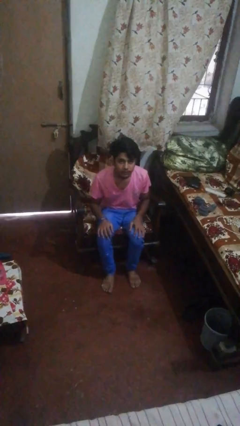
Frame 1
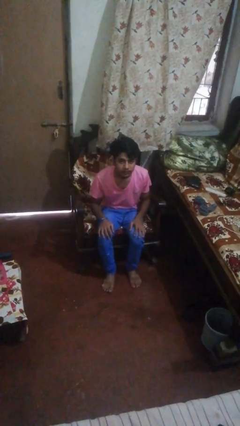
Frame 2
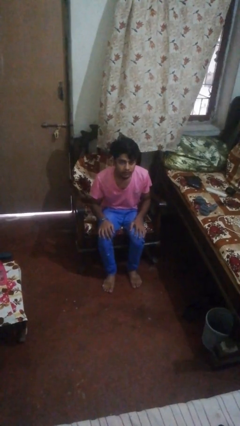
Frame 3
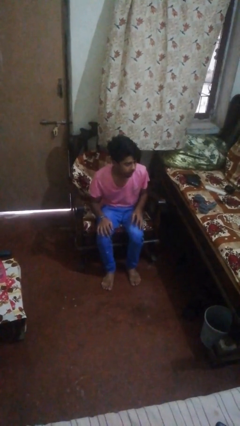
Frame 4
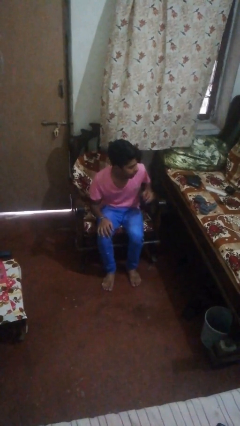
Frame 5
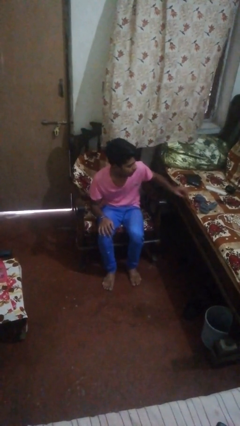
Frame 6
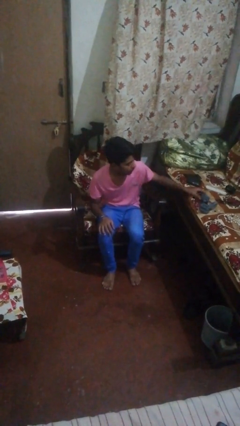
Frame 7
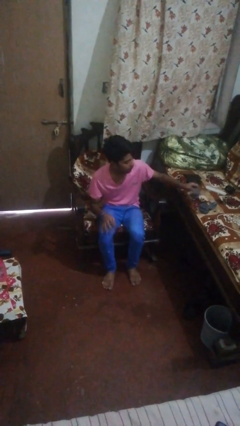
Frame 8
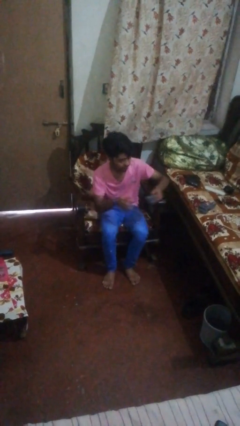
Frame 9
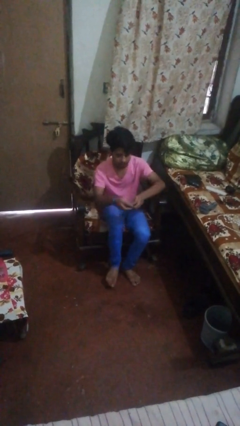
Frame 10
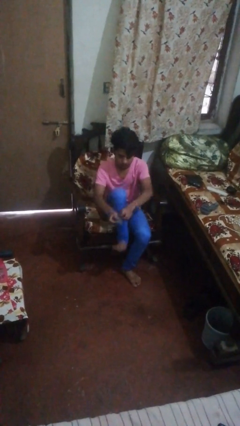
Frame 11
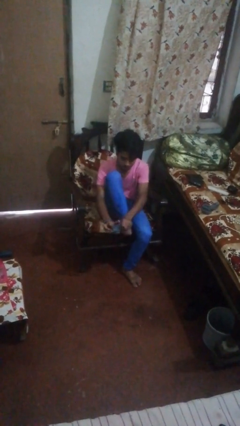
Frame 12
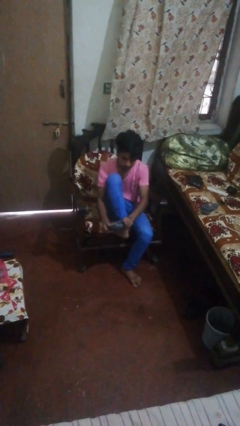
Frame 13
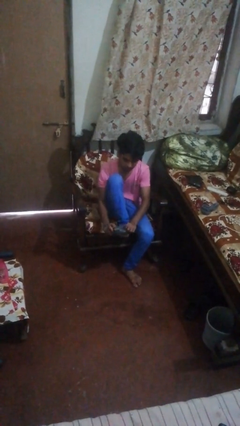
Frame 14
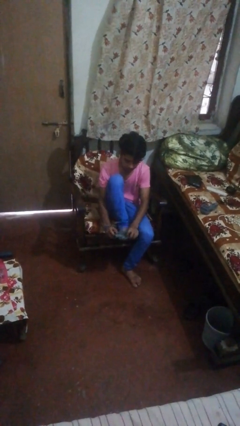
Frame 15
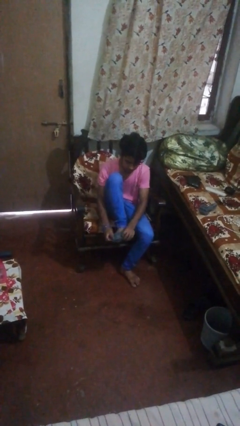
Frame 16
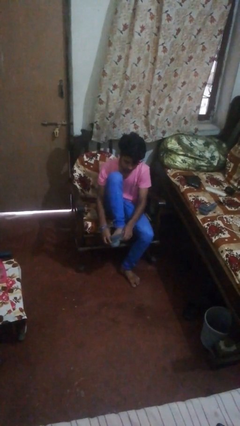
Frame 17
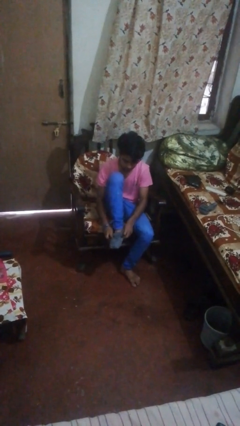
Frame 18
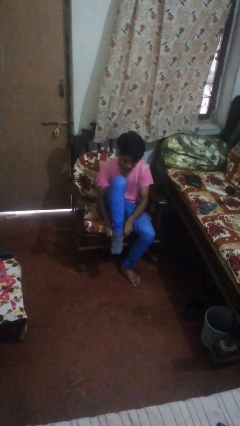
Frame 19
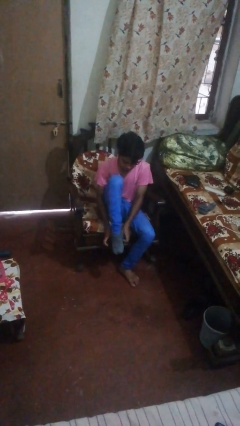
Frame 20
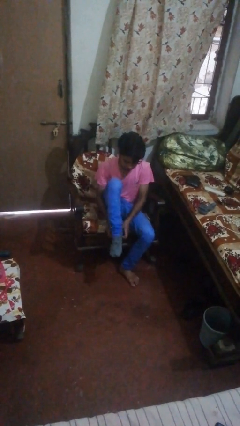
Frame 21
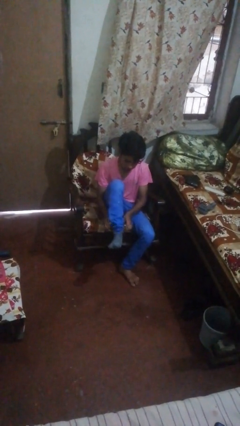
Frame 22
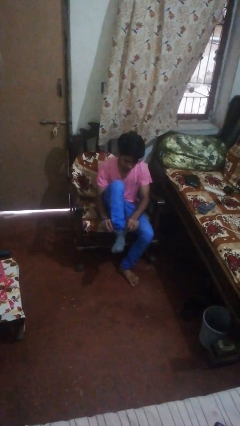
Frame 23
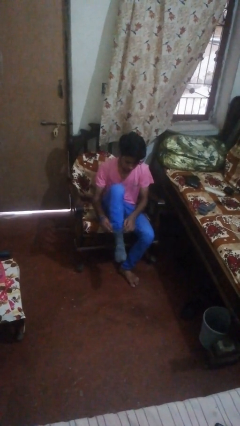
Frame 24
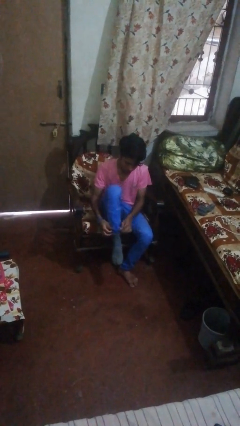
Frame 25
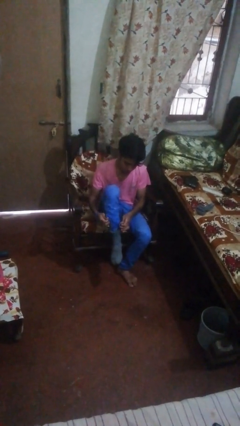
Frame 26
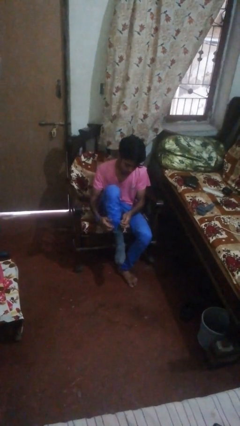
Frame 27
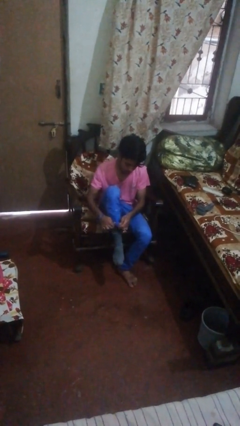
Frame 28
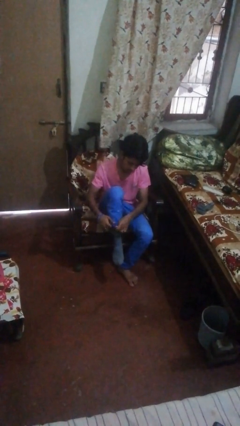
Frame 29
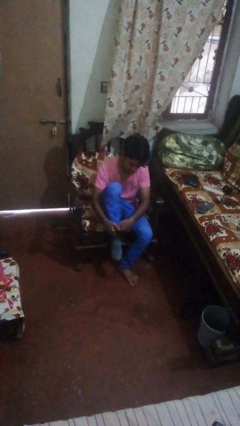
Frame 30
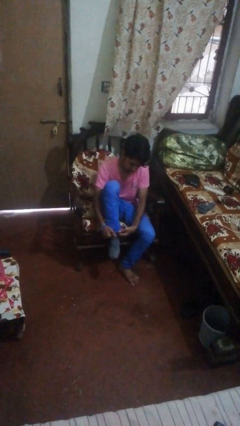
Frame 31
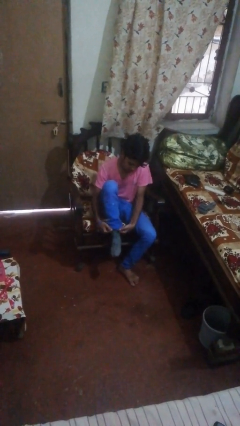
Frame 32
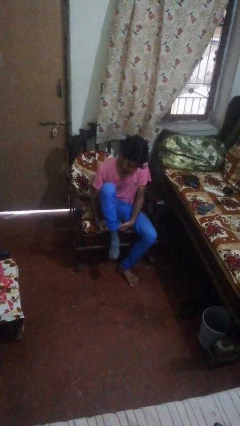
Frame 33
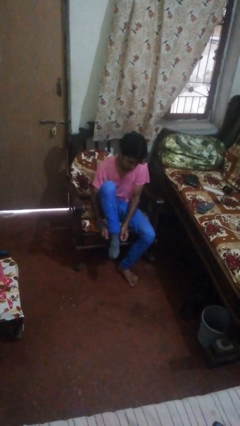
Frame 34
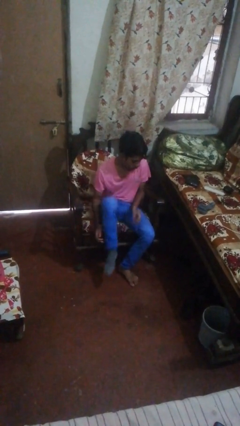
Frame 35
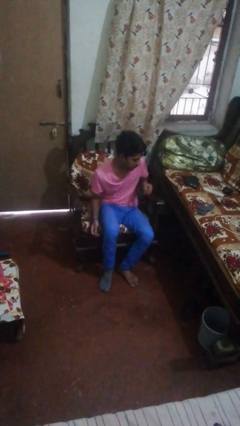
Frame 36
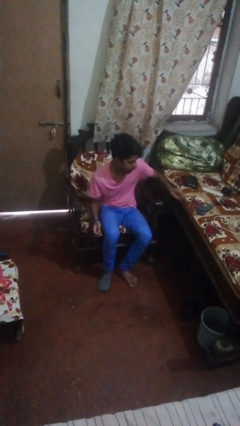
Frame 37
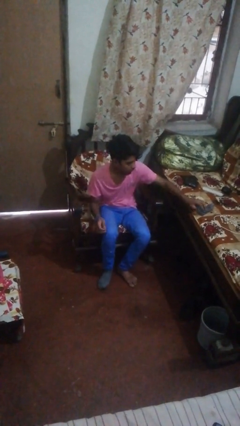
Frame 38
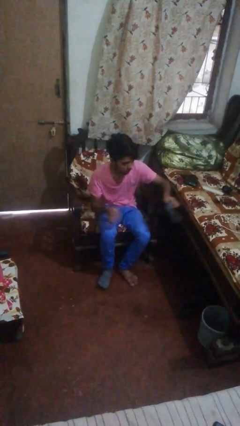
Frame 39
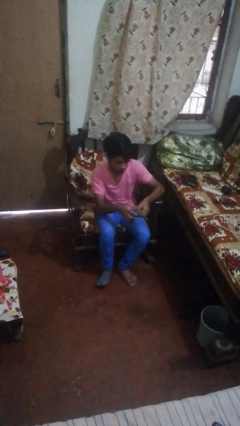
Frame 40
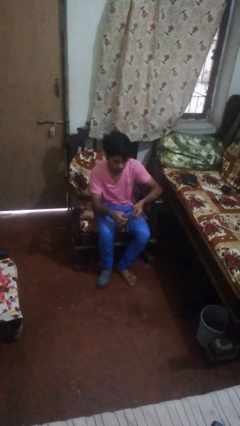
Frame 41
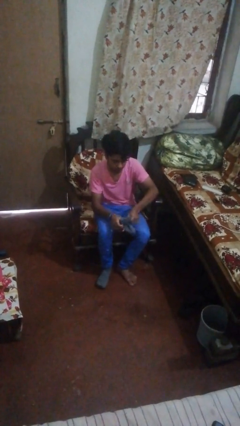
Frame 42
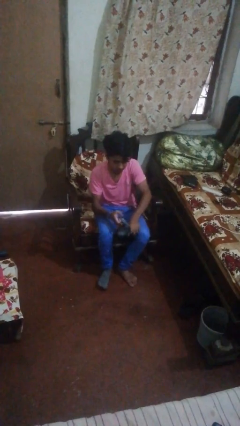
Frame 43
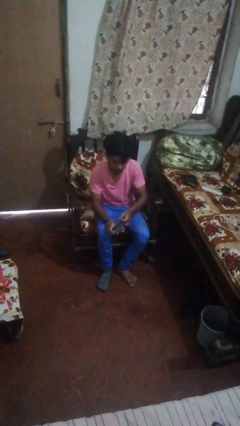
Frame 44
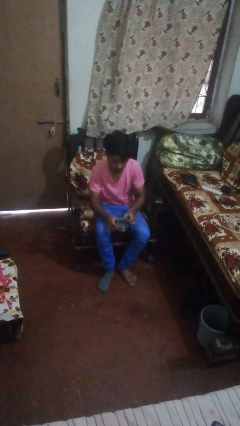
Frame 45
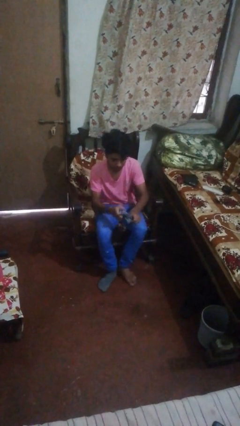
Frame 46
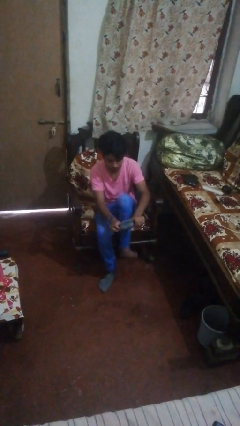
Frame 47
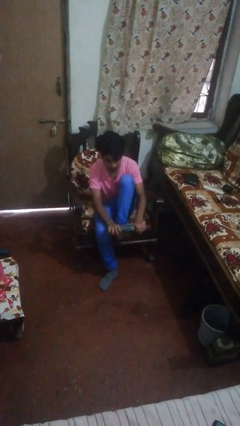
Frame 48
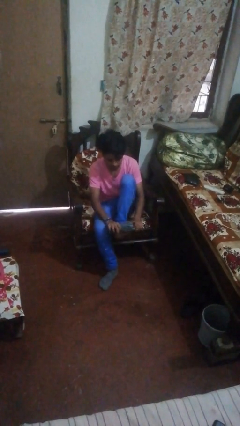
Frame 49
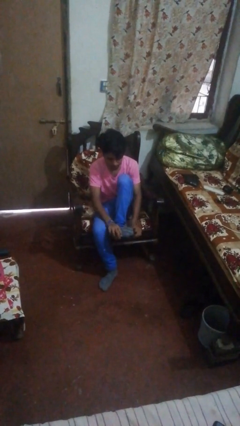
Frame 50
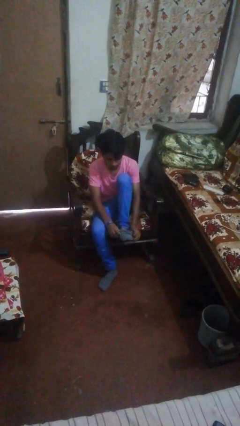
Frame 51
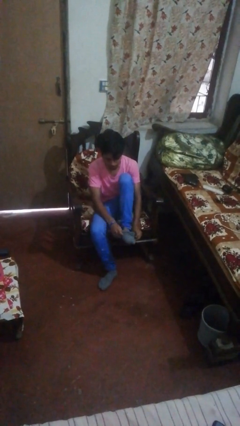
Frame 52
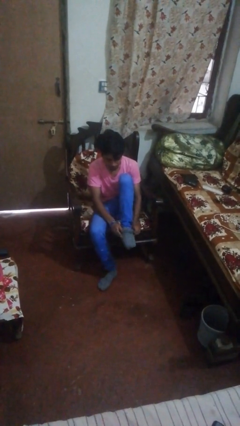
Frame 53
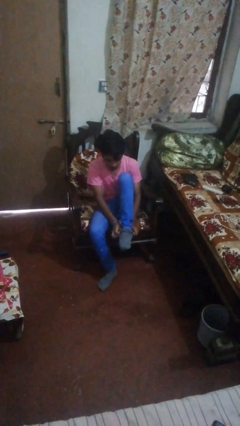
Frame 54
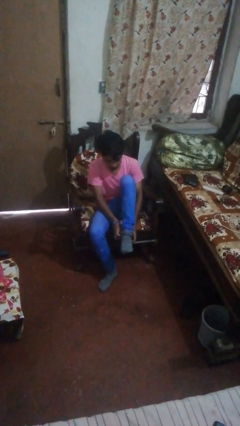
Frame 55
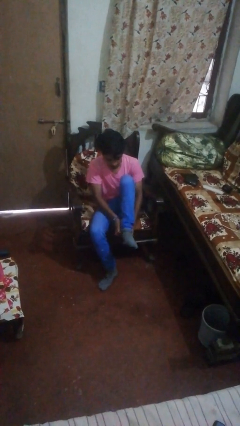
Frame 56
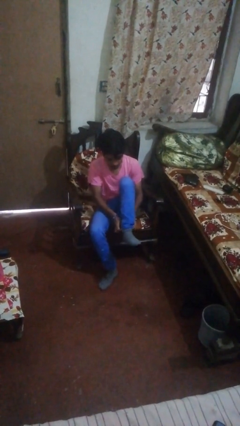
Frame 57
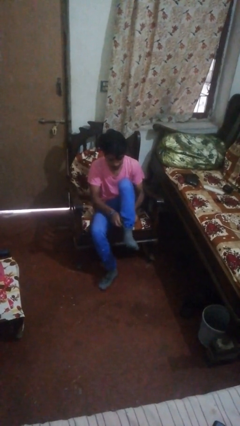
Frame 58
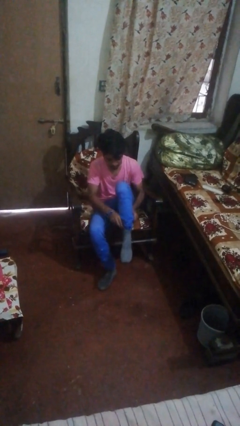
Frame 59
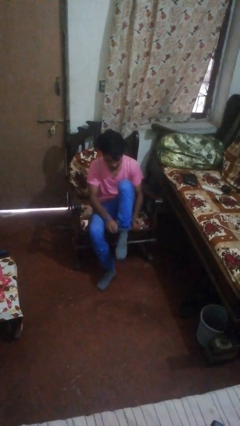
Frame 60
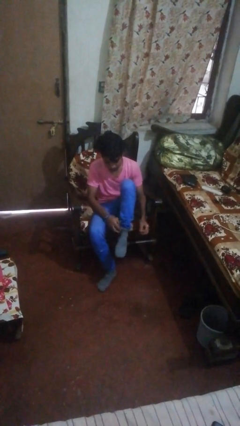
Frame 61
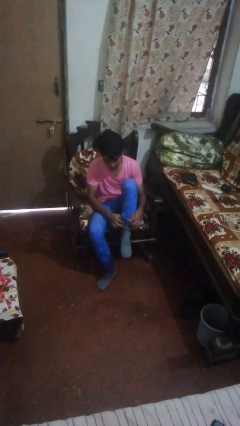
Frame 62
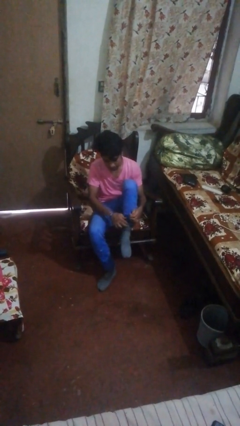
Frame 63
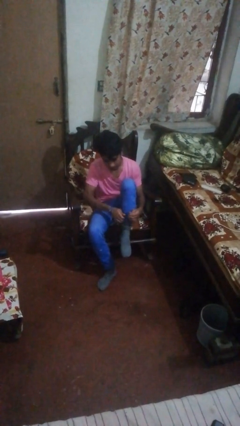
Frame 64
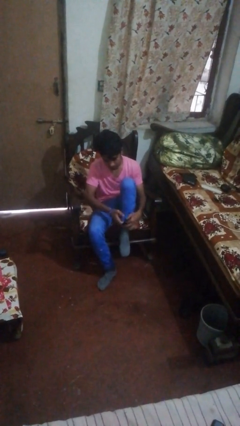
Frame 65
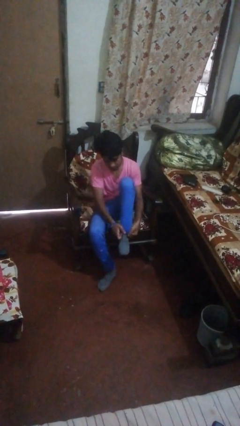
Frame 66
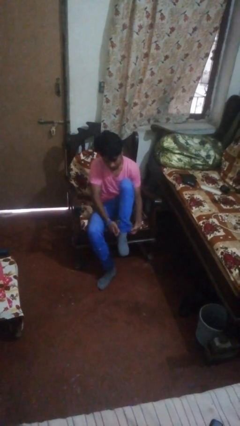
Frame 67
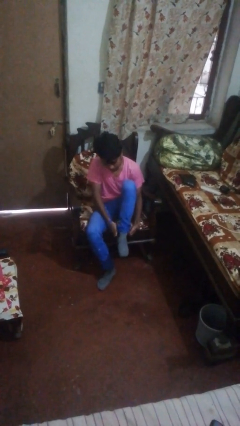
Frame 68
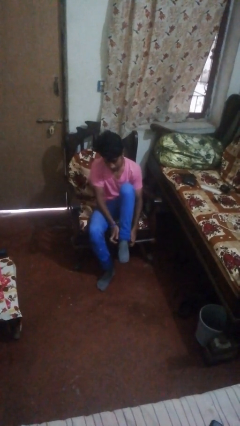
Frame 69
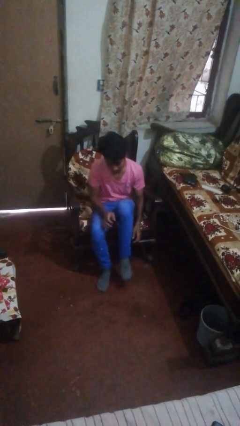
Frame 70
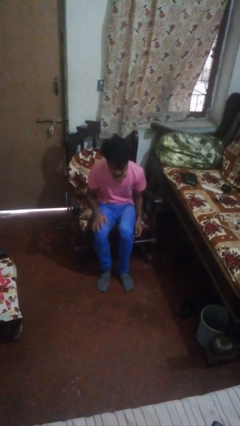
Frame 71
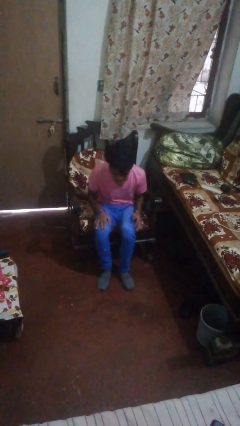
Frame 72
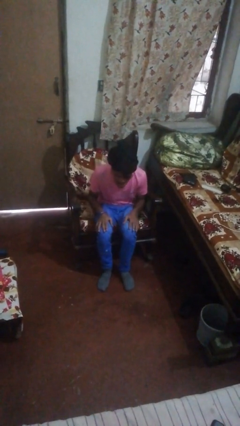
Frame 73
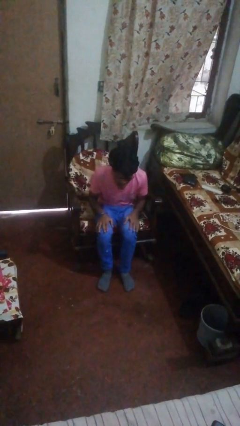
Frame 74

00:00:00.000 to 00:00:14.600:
person puts on socks

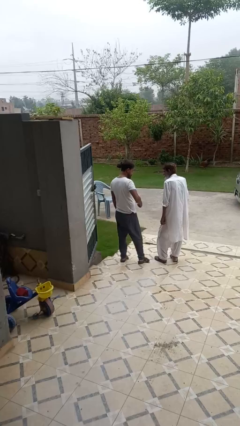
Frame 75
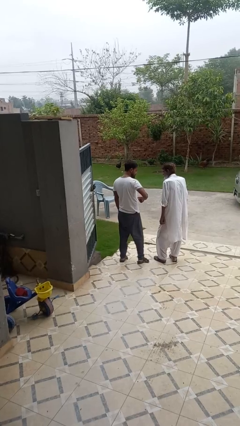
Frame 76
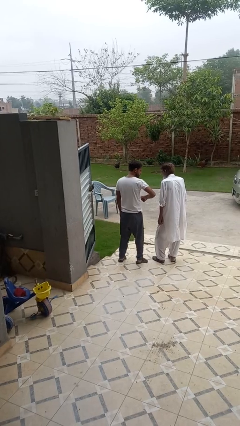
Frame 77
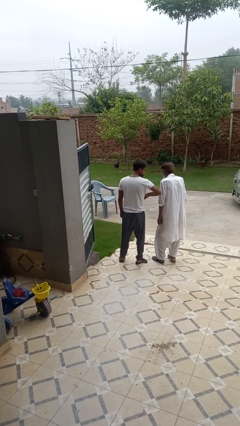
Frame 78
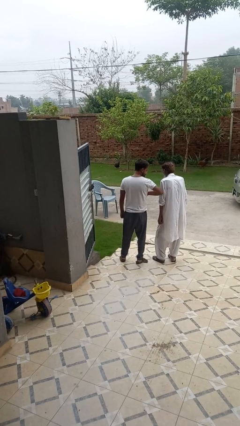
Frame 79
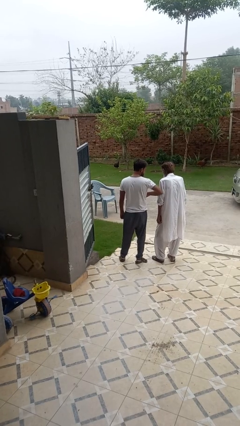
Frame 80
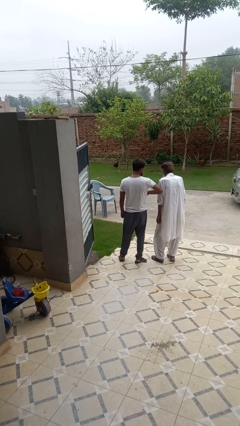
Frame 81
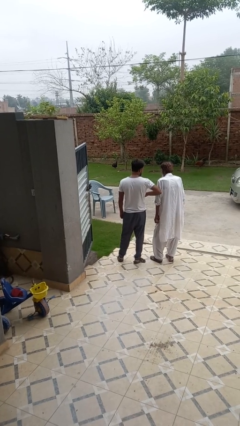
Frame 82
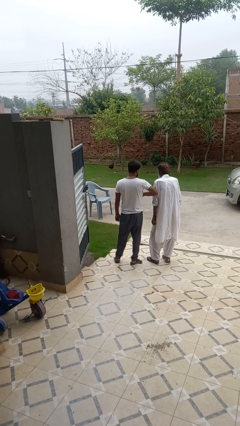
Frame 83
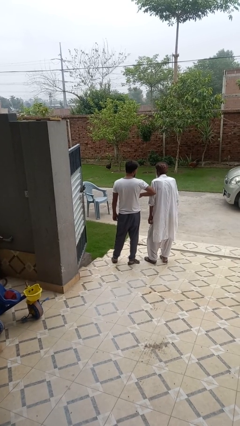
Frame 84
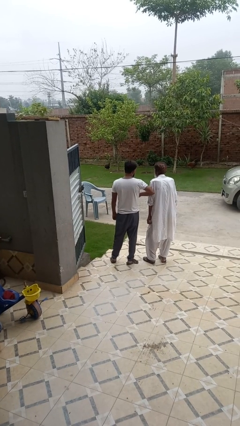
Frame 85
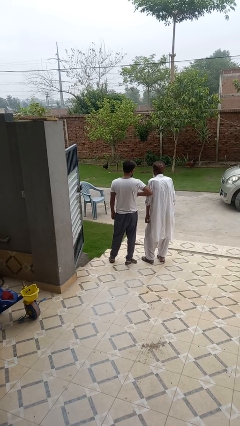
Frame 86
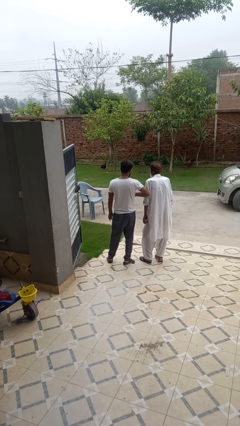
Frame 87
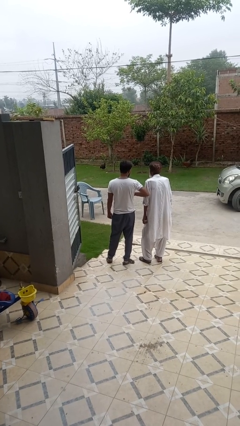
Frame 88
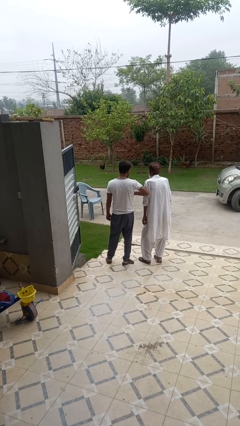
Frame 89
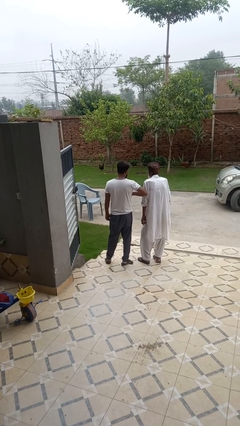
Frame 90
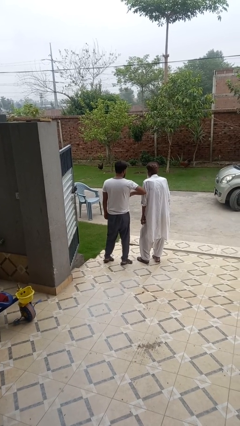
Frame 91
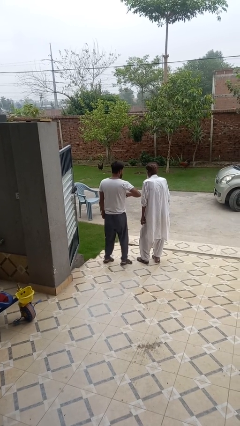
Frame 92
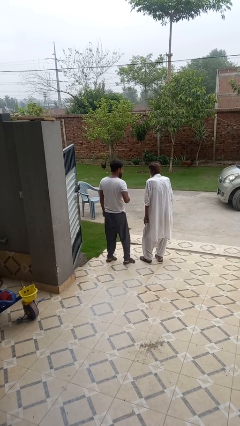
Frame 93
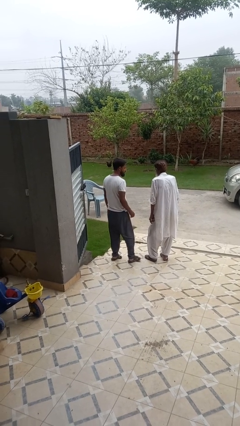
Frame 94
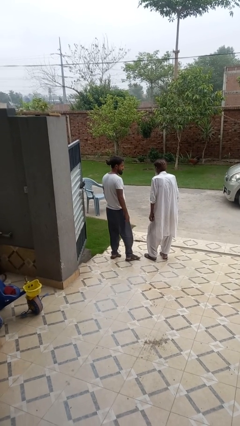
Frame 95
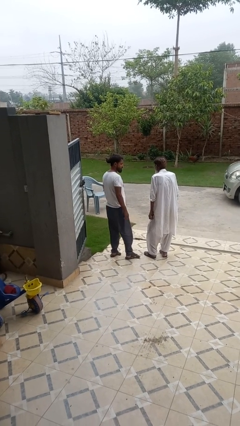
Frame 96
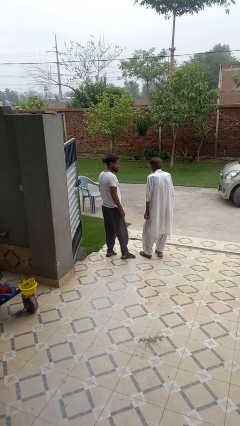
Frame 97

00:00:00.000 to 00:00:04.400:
person nudges person with elbow
